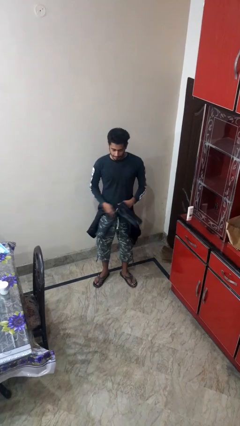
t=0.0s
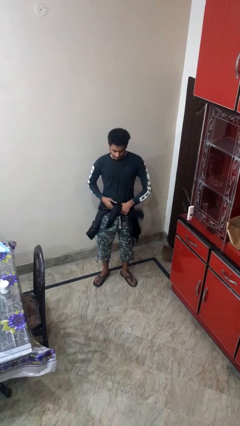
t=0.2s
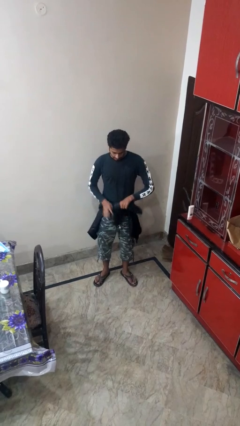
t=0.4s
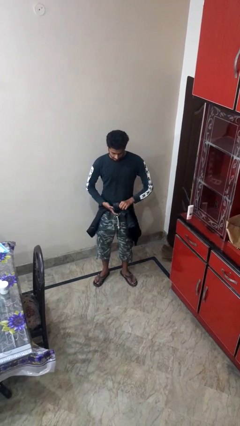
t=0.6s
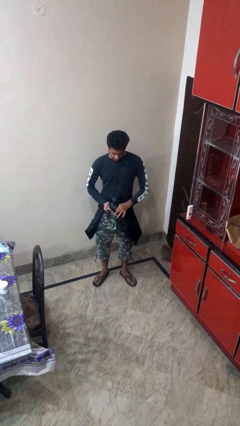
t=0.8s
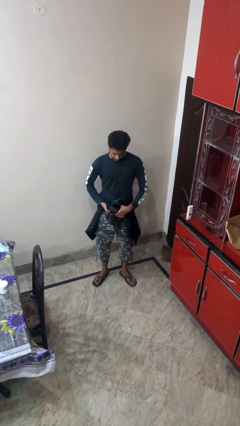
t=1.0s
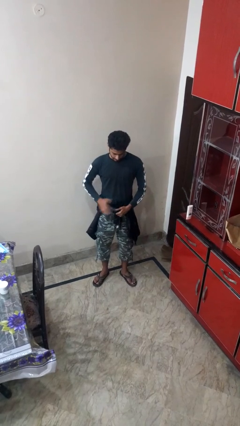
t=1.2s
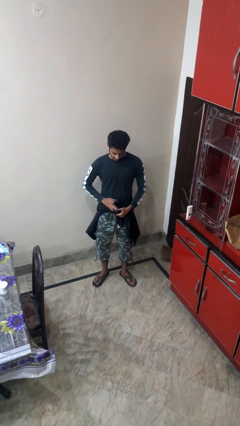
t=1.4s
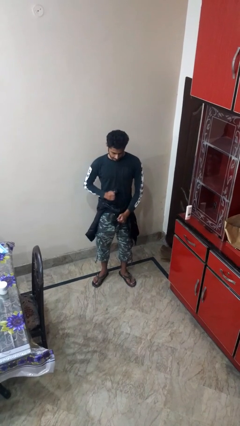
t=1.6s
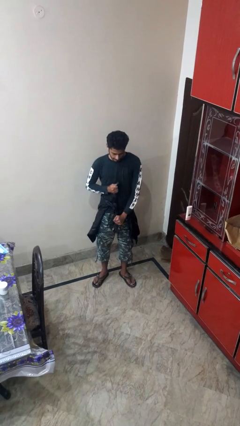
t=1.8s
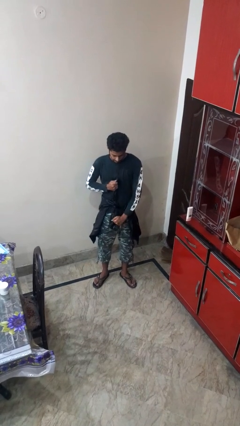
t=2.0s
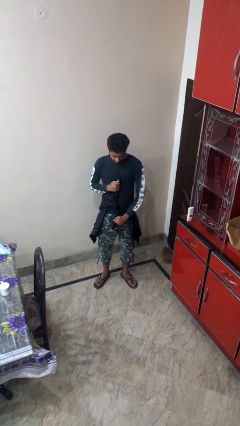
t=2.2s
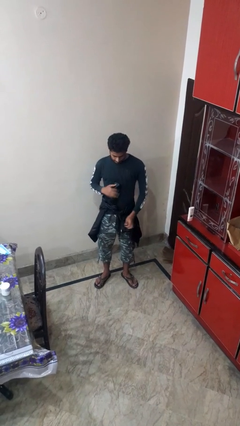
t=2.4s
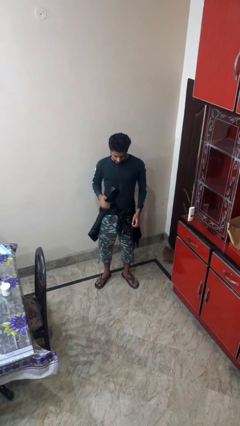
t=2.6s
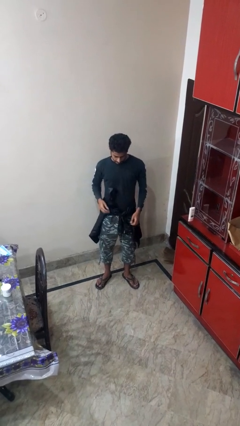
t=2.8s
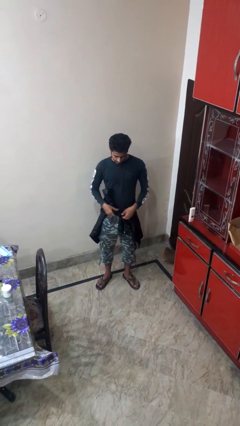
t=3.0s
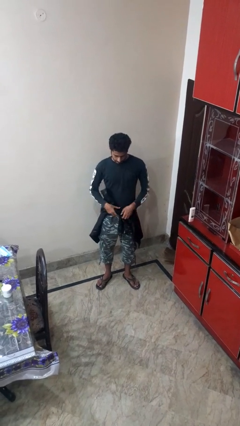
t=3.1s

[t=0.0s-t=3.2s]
person ties jacket around waist

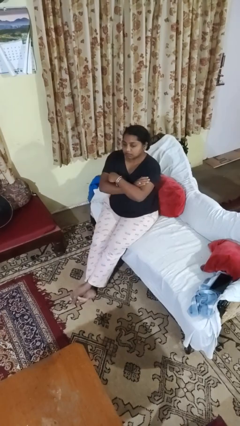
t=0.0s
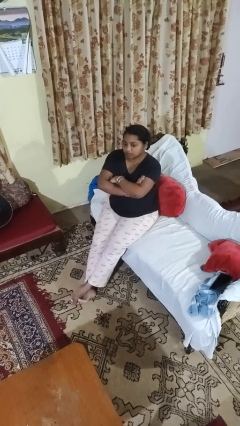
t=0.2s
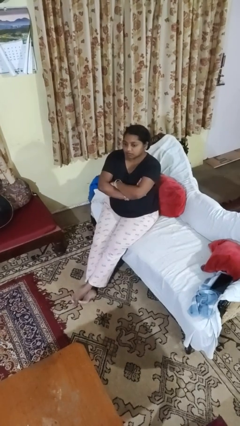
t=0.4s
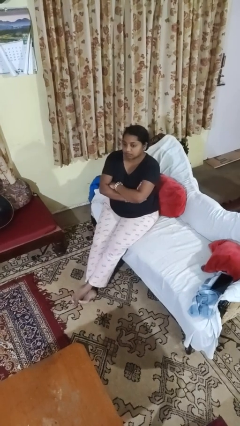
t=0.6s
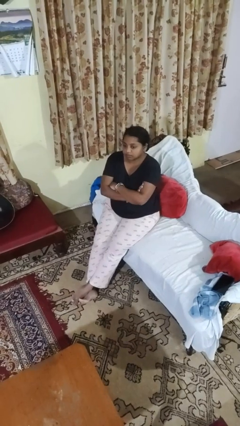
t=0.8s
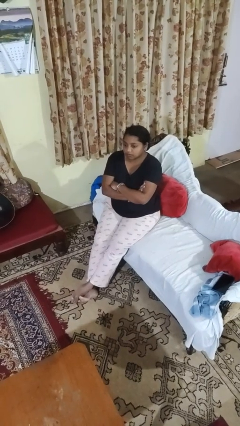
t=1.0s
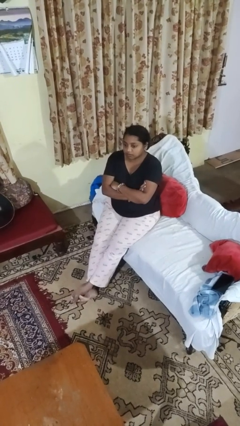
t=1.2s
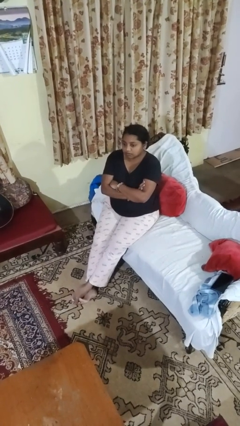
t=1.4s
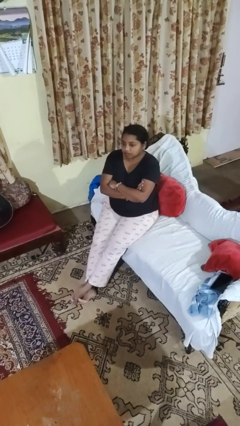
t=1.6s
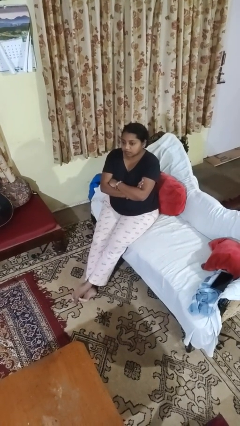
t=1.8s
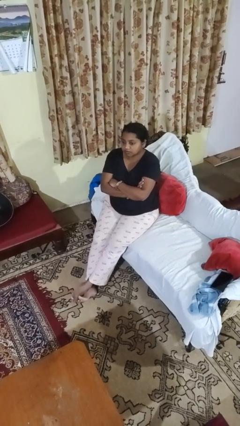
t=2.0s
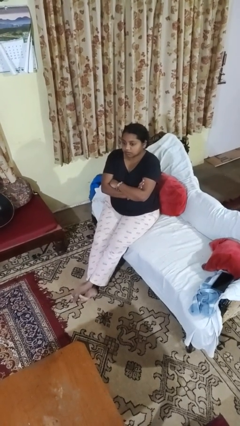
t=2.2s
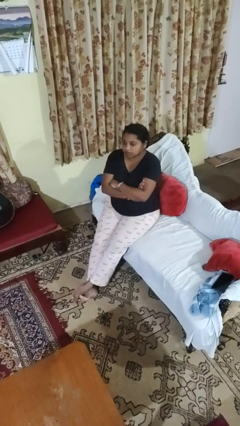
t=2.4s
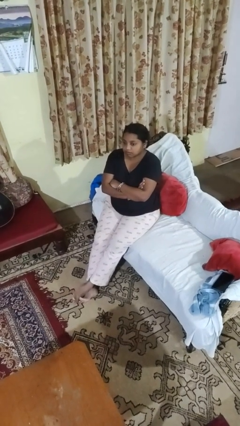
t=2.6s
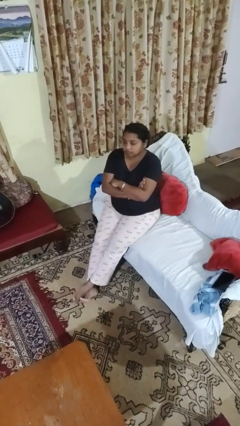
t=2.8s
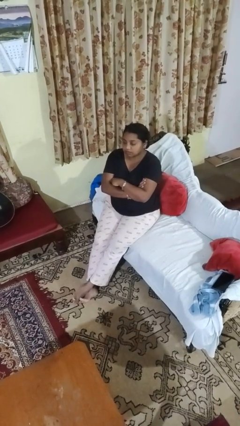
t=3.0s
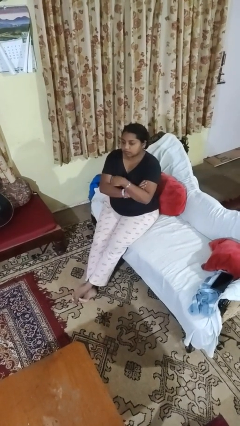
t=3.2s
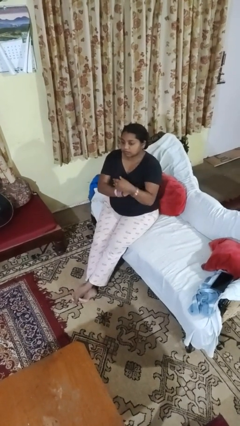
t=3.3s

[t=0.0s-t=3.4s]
person crosses arms

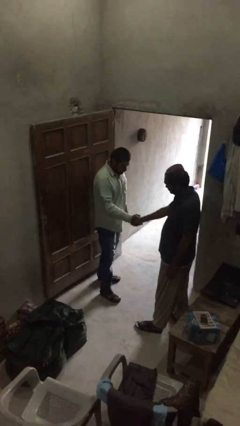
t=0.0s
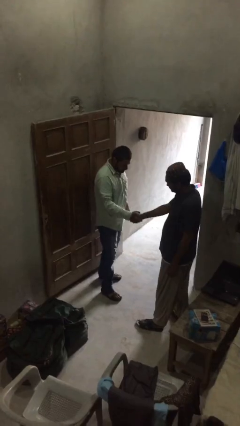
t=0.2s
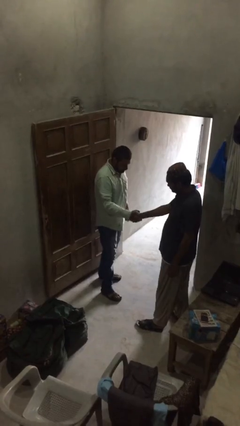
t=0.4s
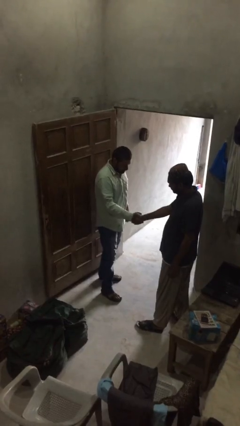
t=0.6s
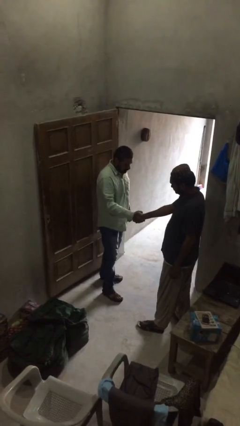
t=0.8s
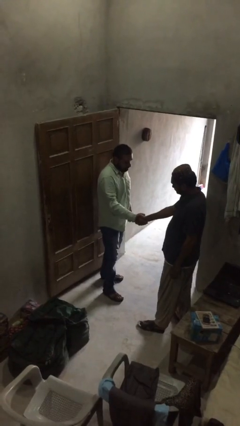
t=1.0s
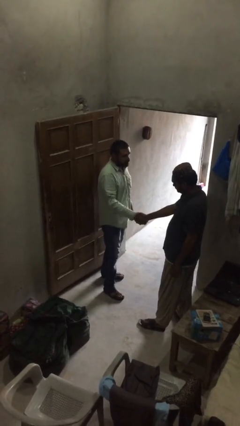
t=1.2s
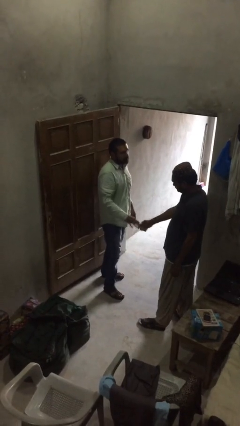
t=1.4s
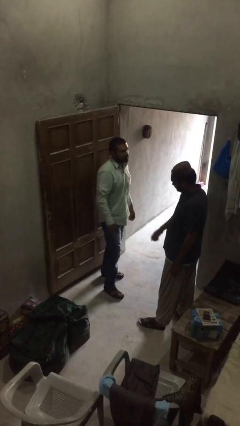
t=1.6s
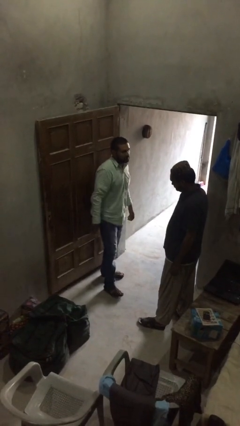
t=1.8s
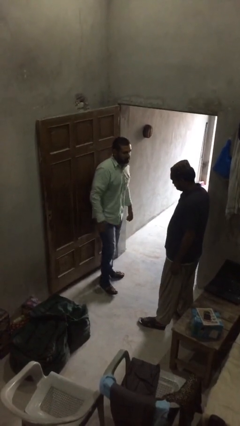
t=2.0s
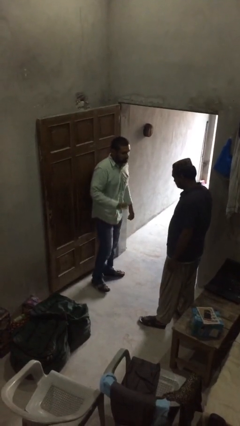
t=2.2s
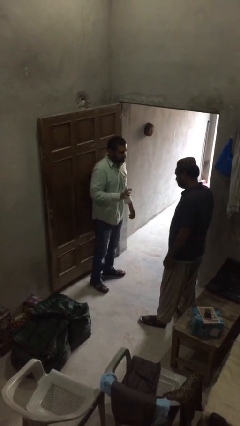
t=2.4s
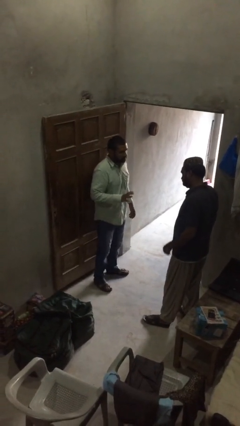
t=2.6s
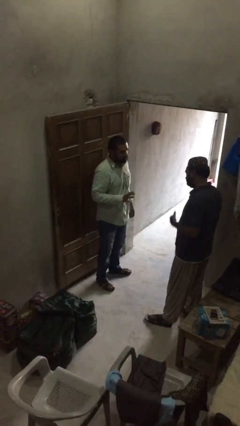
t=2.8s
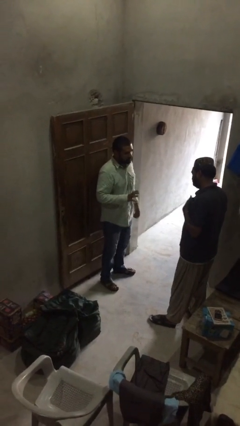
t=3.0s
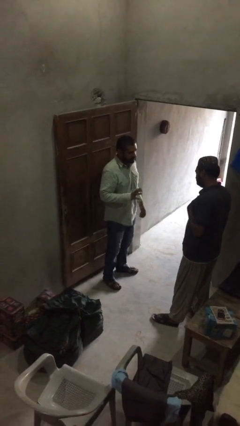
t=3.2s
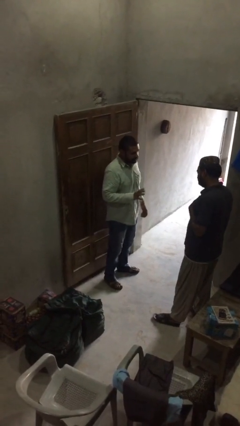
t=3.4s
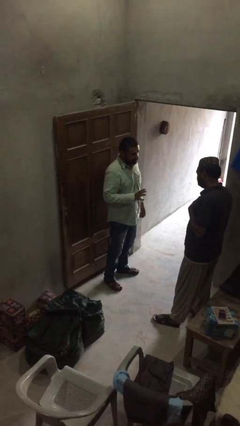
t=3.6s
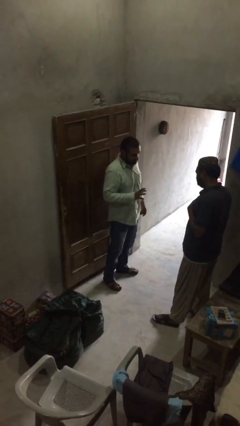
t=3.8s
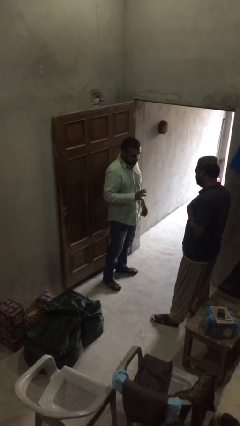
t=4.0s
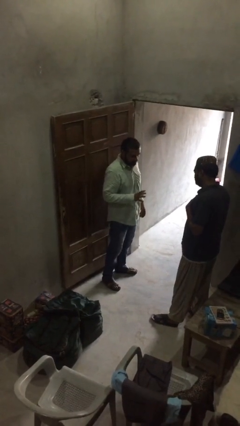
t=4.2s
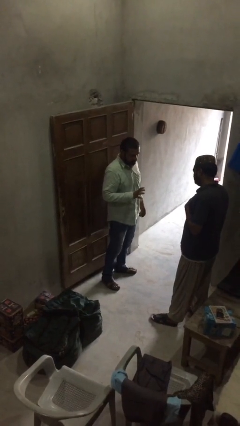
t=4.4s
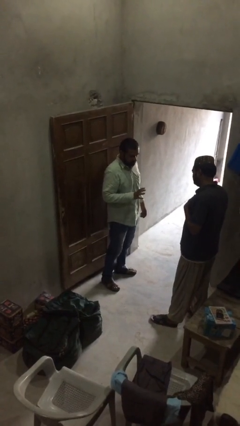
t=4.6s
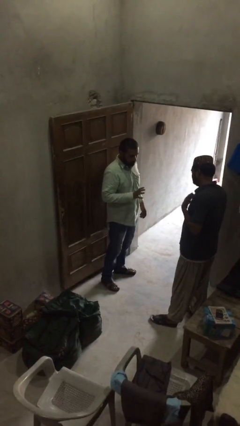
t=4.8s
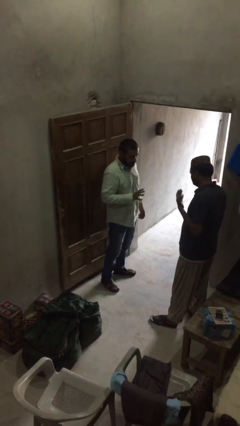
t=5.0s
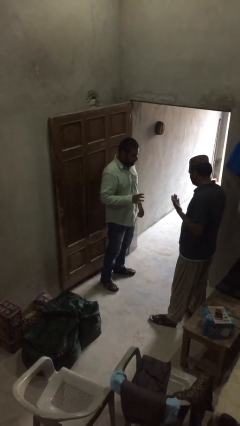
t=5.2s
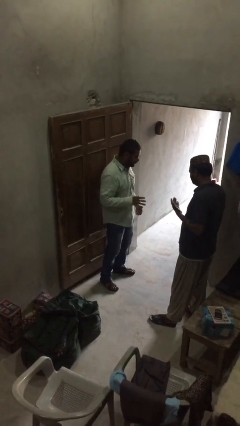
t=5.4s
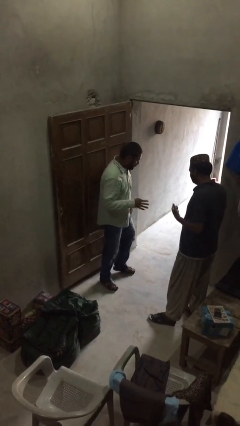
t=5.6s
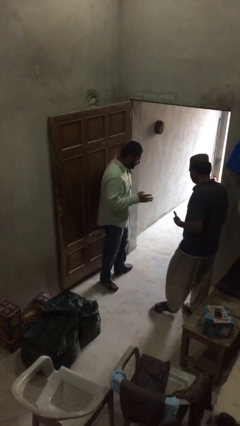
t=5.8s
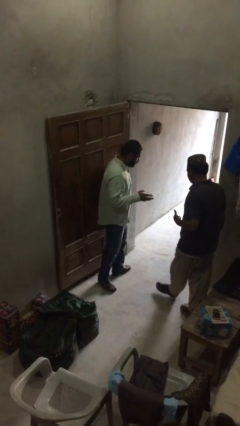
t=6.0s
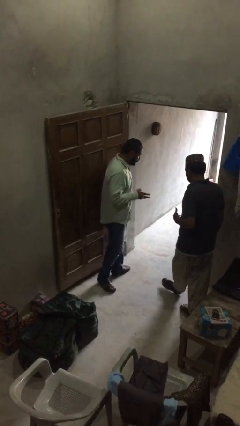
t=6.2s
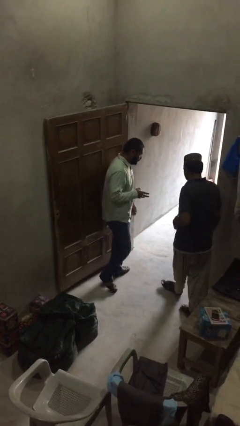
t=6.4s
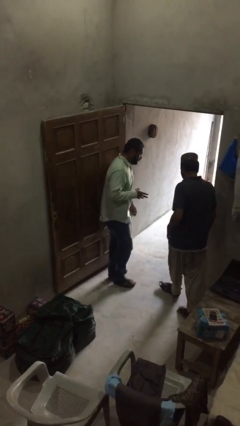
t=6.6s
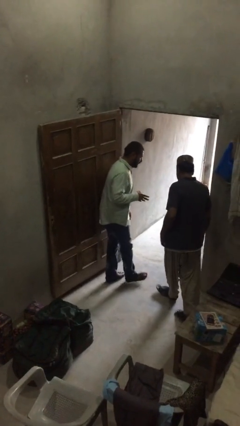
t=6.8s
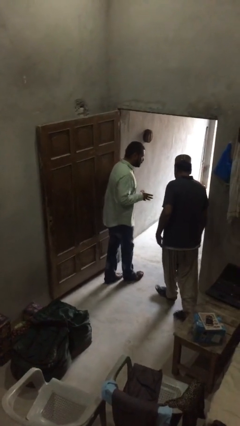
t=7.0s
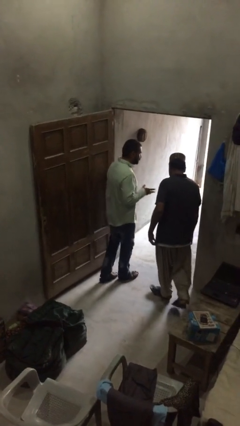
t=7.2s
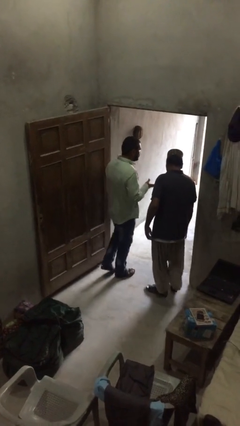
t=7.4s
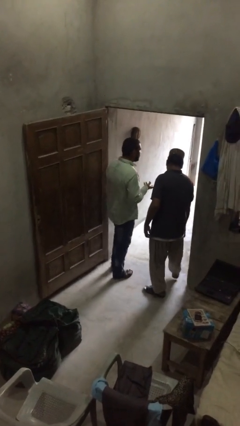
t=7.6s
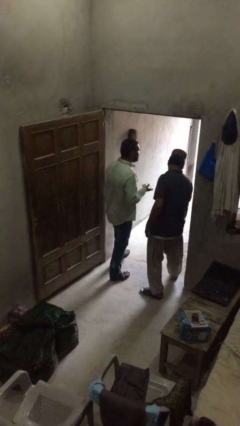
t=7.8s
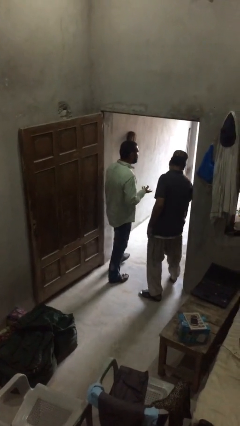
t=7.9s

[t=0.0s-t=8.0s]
person talks to person

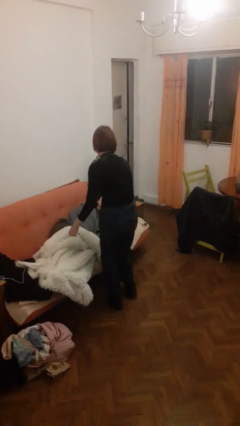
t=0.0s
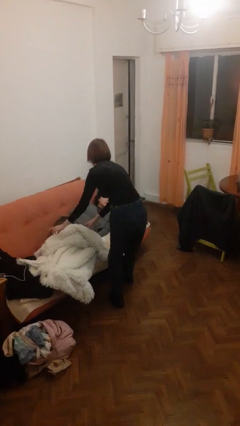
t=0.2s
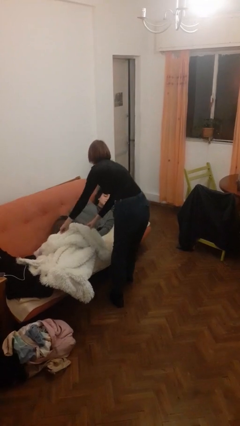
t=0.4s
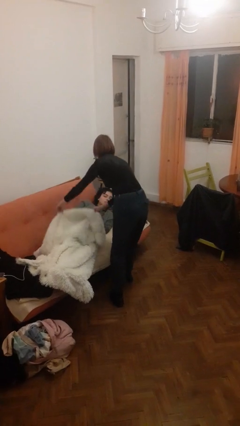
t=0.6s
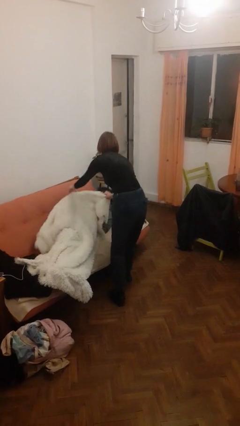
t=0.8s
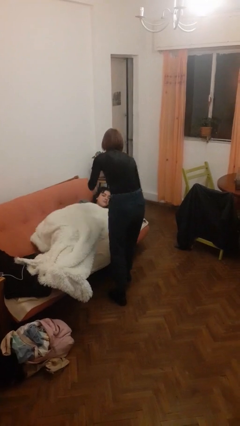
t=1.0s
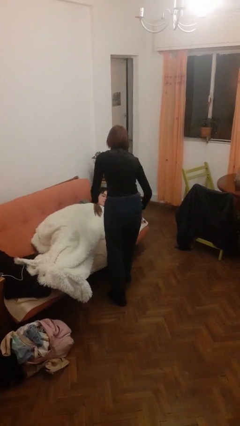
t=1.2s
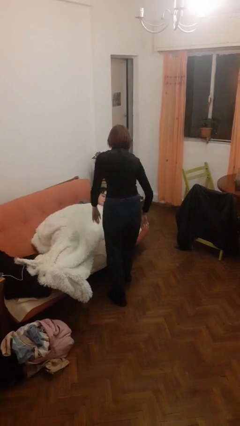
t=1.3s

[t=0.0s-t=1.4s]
person covers friend with blanket

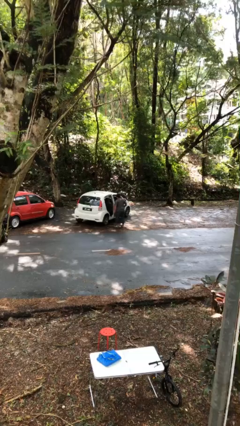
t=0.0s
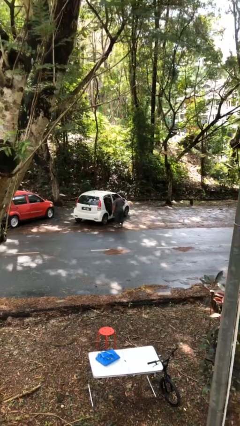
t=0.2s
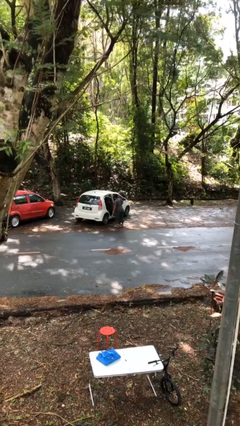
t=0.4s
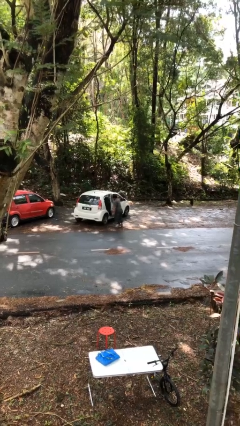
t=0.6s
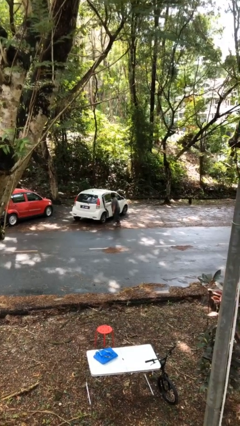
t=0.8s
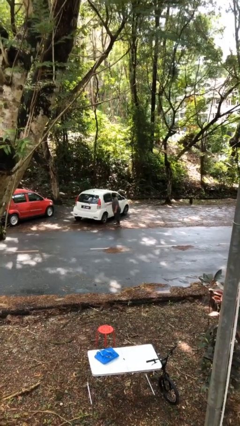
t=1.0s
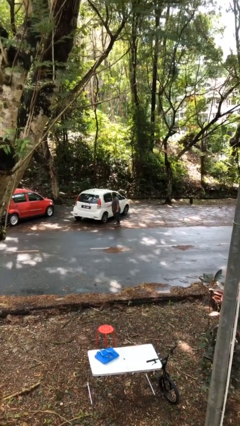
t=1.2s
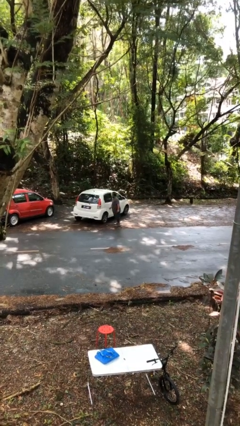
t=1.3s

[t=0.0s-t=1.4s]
person closes car door
